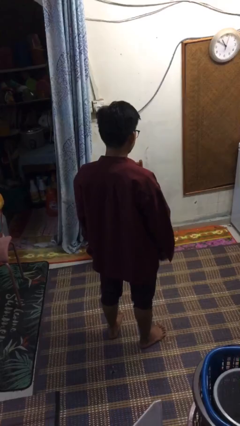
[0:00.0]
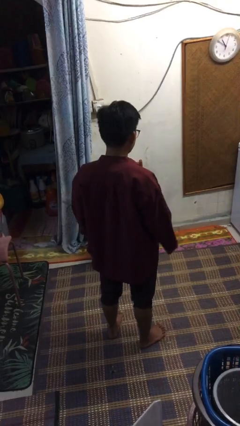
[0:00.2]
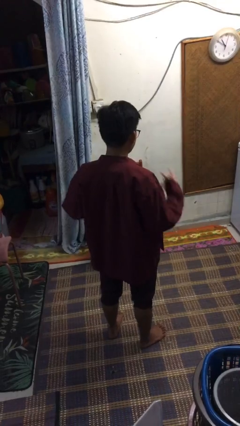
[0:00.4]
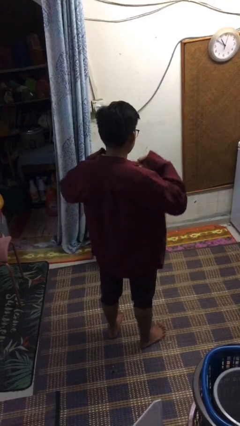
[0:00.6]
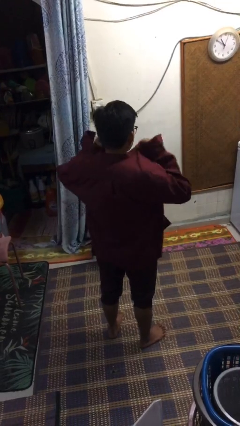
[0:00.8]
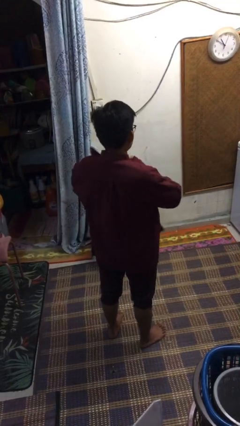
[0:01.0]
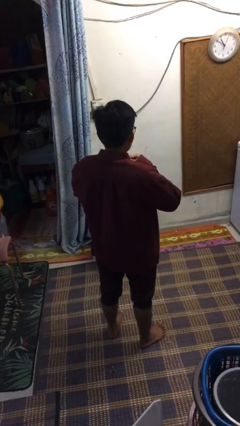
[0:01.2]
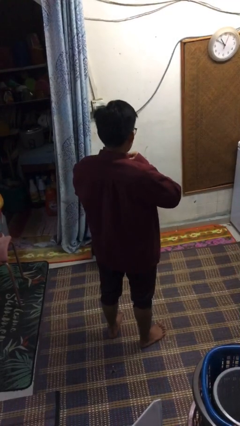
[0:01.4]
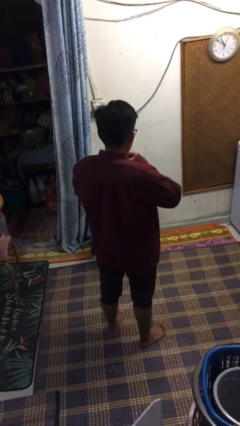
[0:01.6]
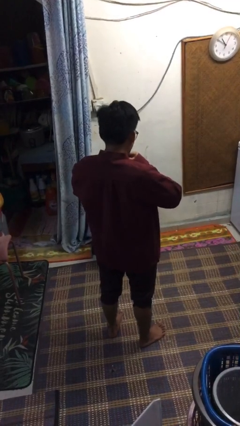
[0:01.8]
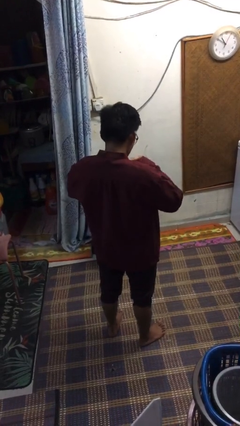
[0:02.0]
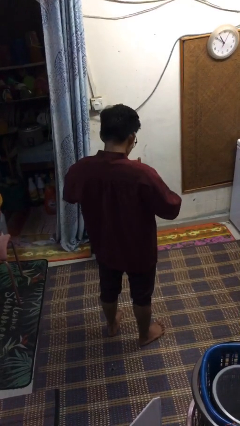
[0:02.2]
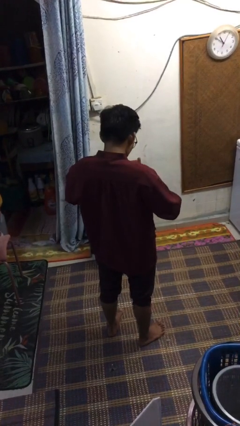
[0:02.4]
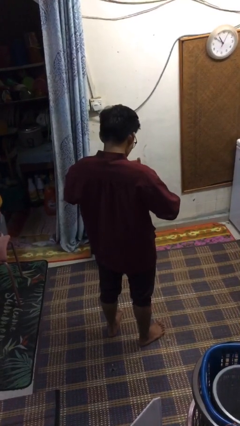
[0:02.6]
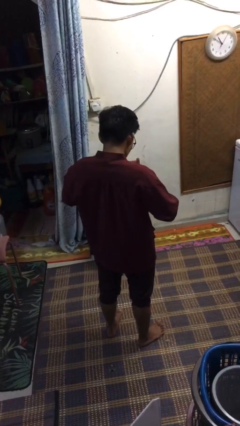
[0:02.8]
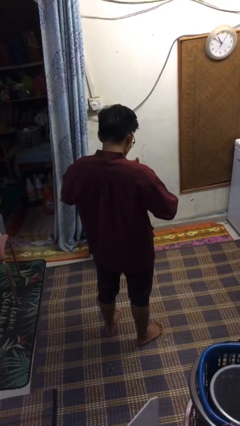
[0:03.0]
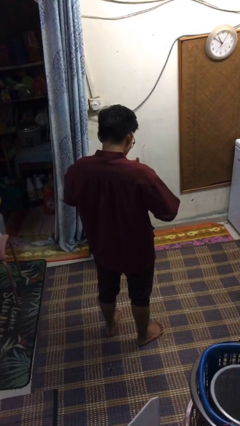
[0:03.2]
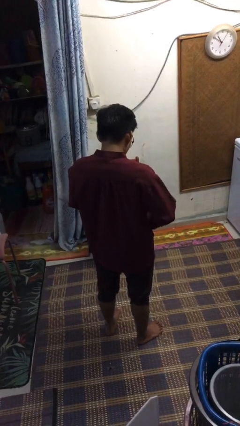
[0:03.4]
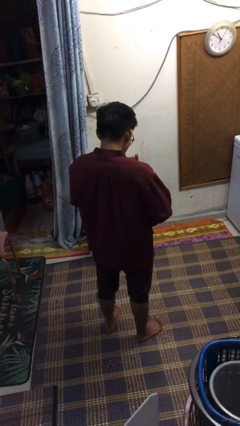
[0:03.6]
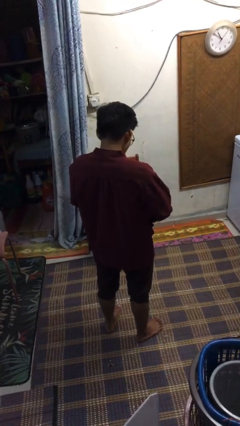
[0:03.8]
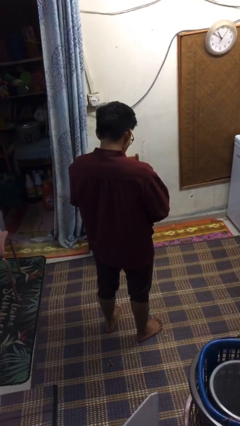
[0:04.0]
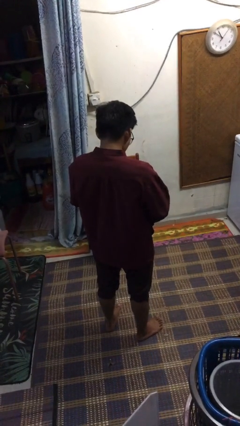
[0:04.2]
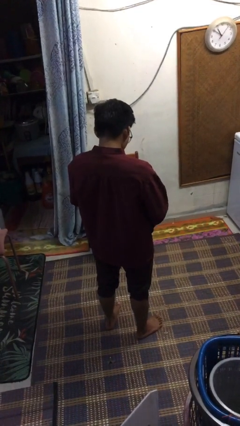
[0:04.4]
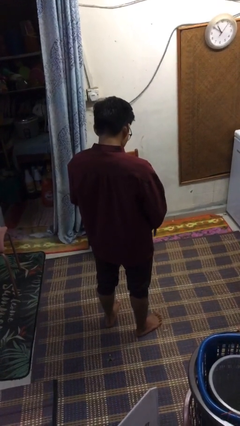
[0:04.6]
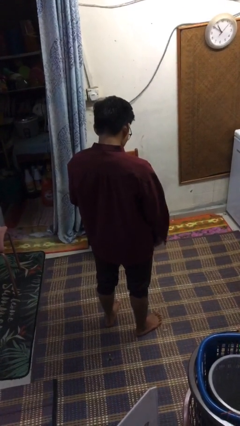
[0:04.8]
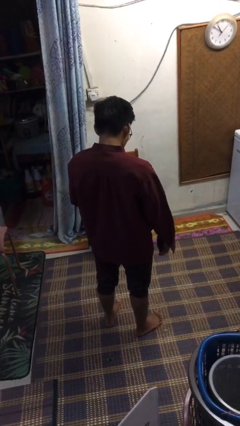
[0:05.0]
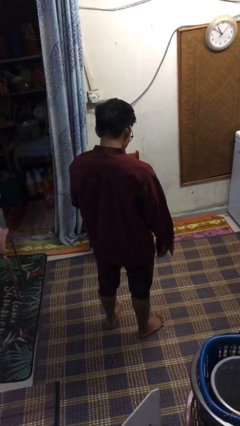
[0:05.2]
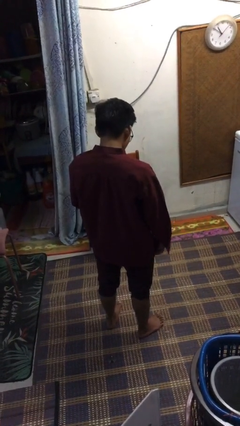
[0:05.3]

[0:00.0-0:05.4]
person buttons shirt

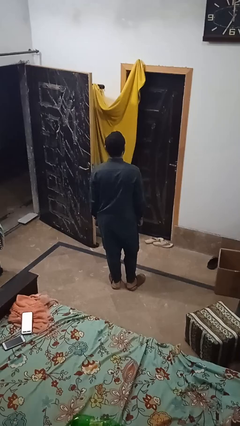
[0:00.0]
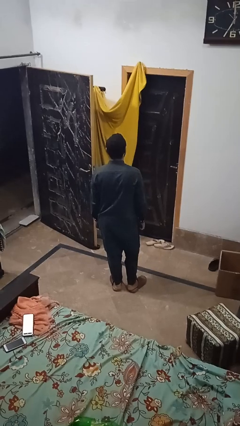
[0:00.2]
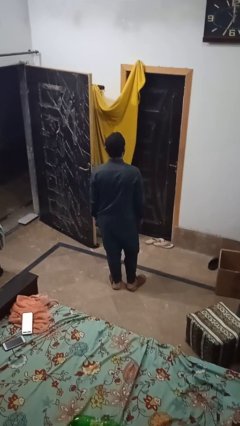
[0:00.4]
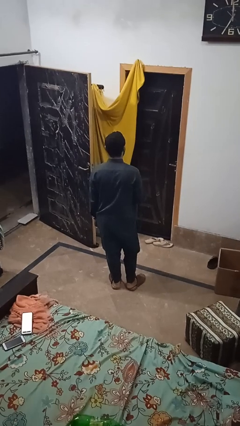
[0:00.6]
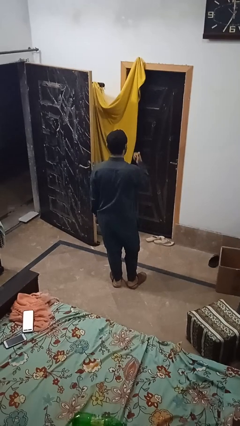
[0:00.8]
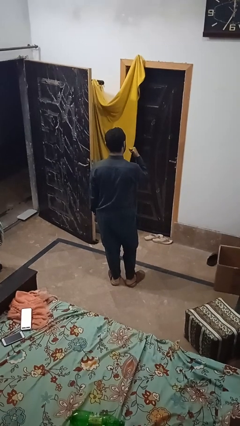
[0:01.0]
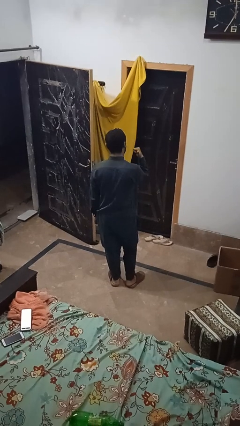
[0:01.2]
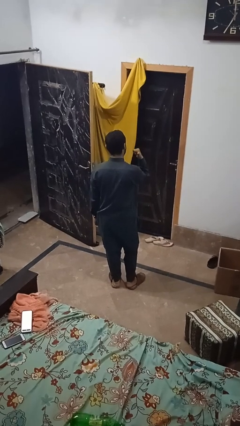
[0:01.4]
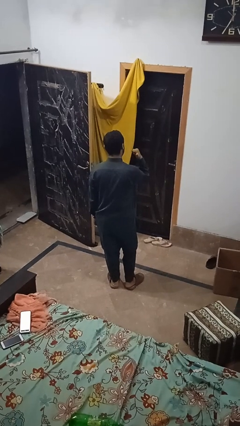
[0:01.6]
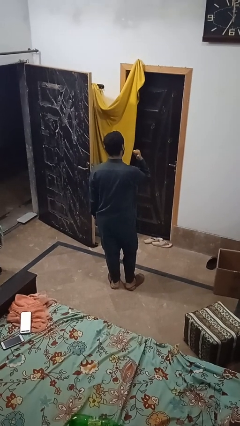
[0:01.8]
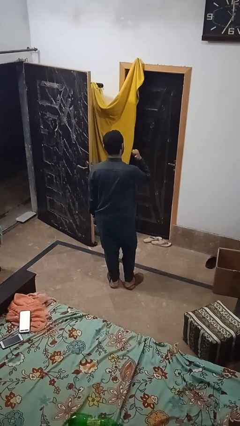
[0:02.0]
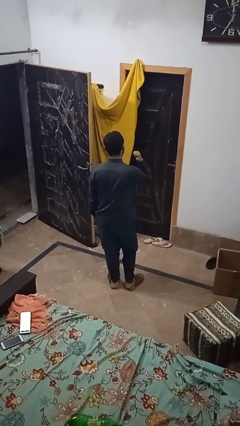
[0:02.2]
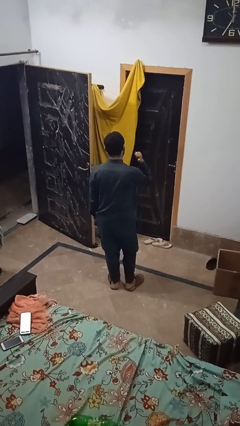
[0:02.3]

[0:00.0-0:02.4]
person gestures behind me

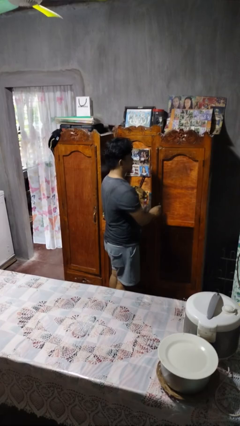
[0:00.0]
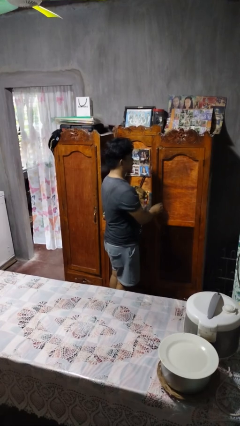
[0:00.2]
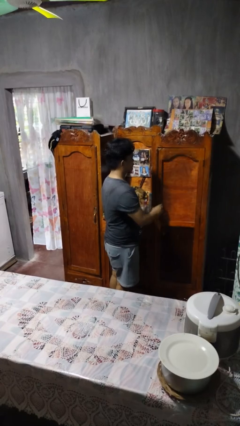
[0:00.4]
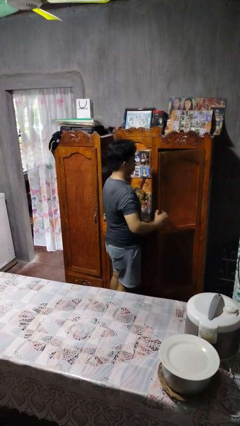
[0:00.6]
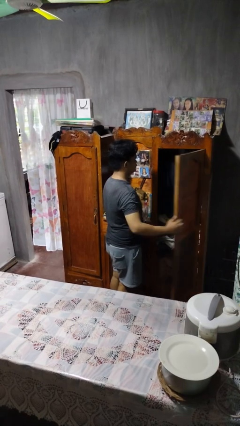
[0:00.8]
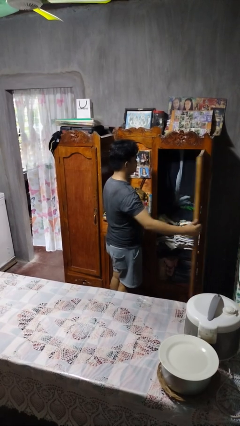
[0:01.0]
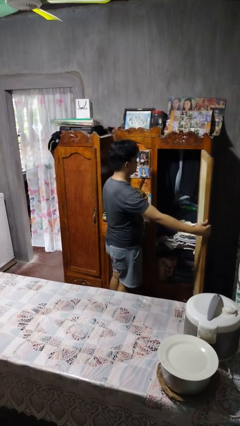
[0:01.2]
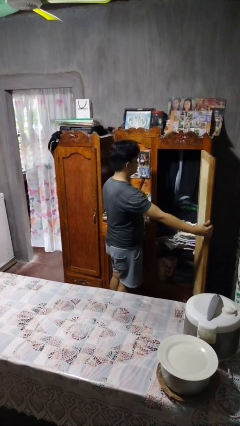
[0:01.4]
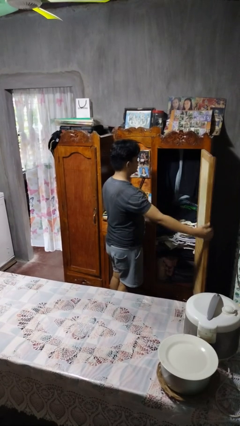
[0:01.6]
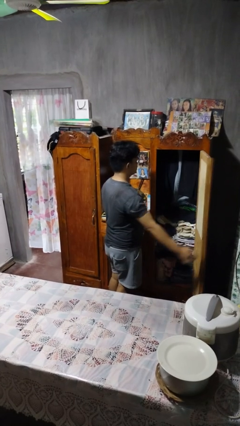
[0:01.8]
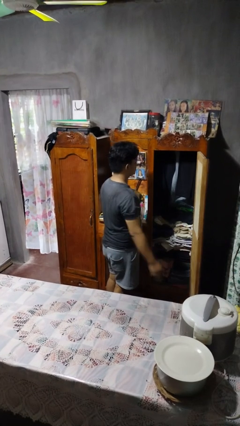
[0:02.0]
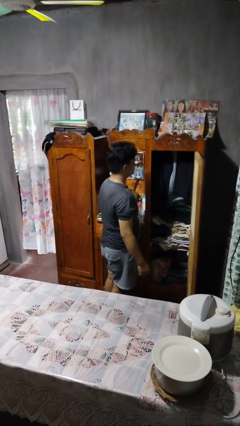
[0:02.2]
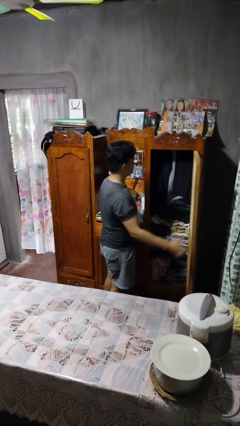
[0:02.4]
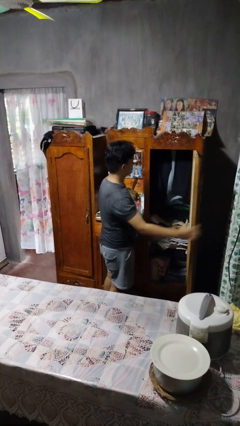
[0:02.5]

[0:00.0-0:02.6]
person opens closet door

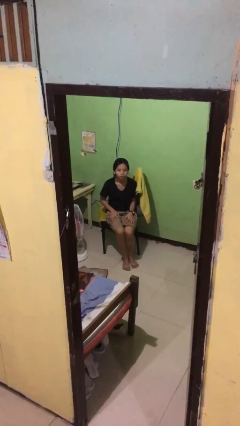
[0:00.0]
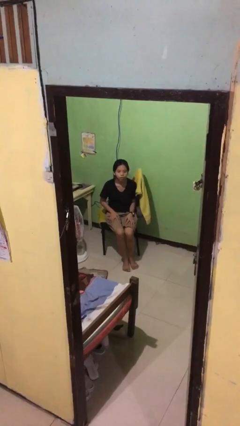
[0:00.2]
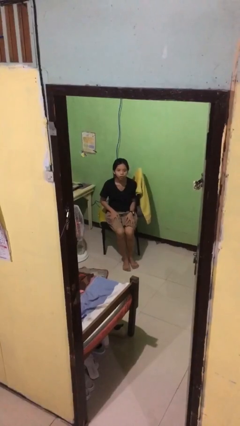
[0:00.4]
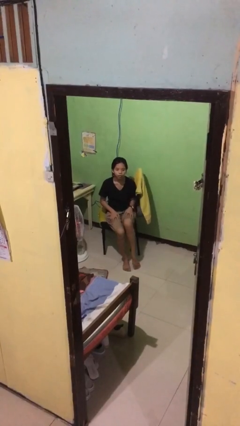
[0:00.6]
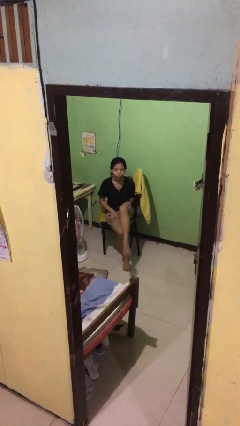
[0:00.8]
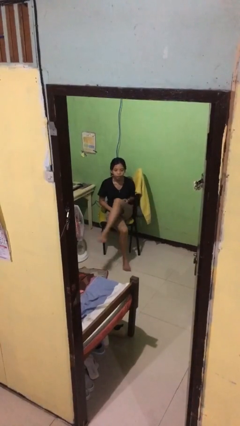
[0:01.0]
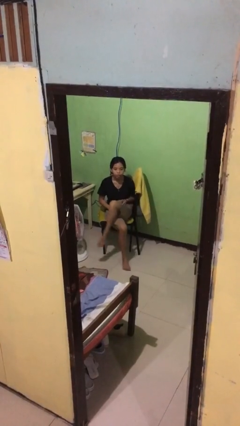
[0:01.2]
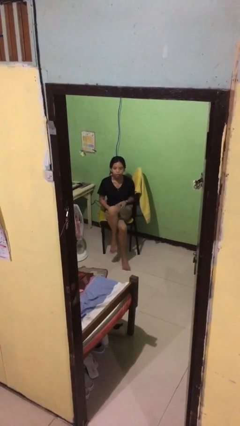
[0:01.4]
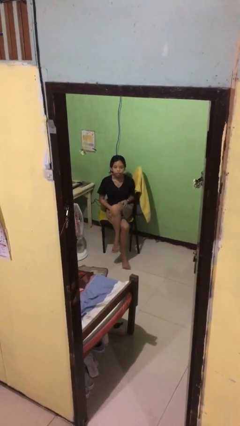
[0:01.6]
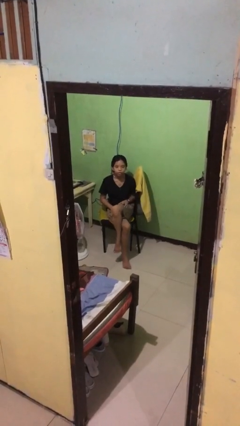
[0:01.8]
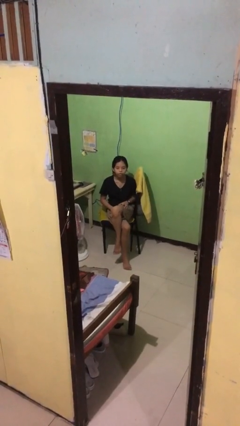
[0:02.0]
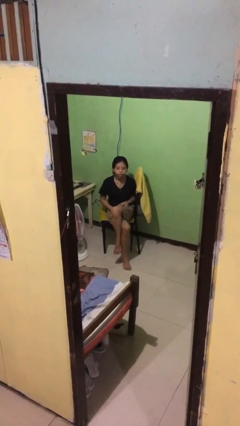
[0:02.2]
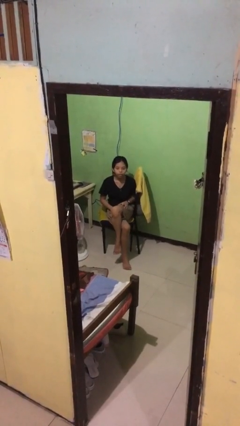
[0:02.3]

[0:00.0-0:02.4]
person crosses legs

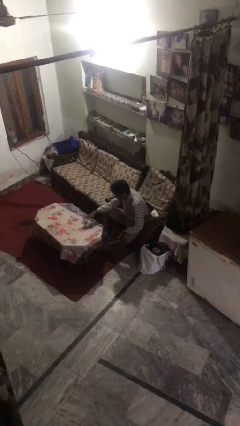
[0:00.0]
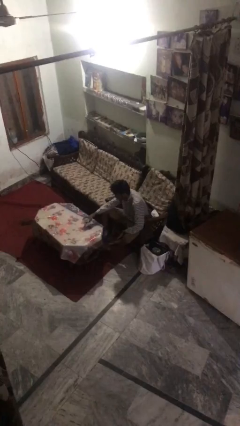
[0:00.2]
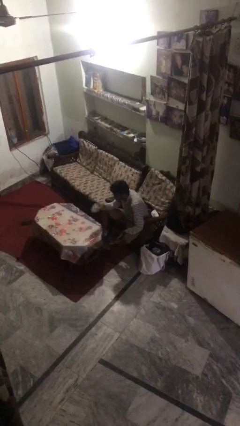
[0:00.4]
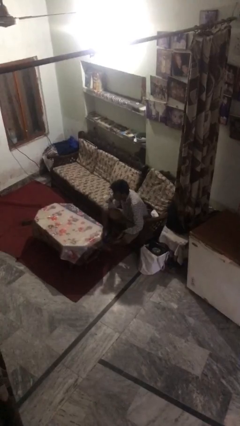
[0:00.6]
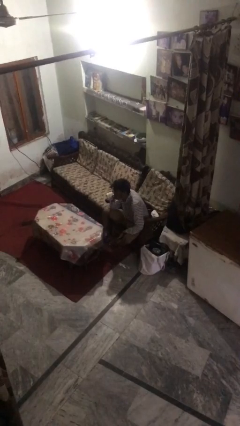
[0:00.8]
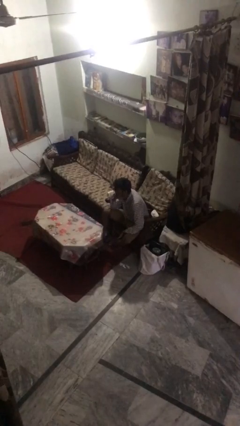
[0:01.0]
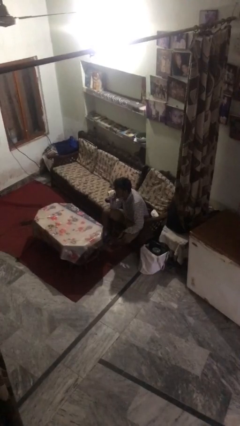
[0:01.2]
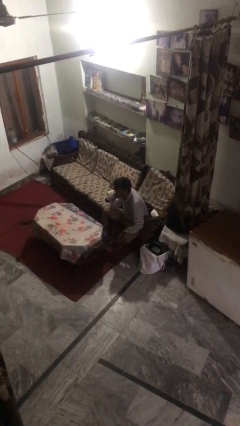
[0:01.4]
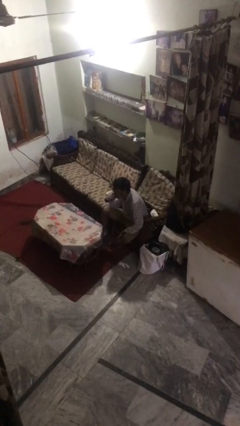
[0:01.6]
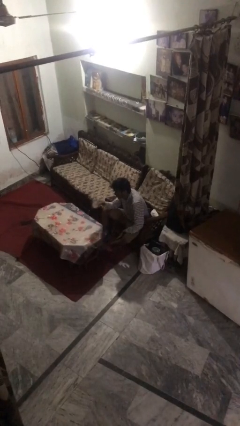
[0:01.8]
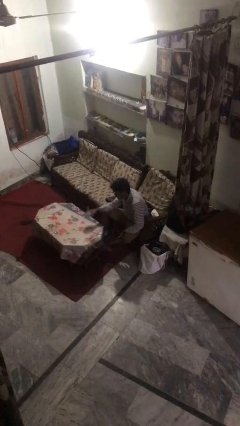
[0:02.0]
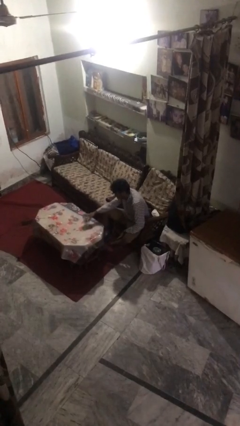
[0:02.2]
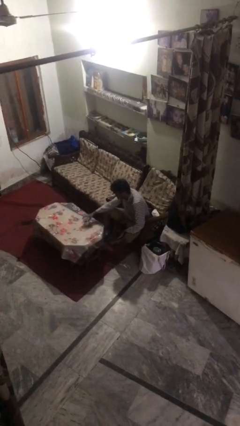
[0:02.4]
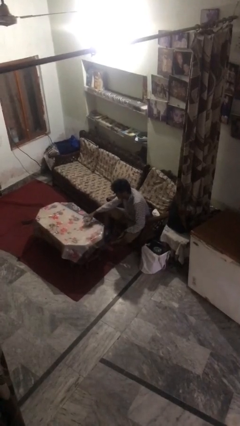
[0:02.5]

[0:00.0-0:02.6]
person drinks from mug

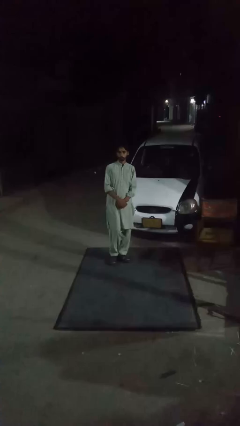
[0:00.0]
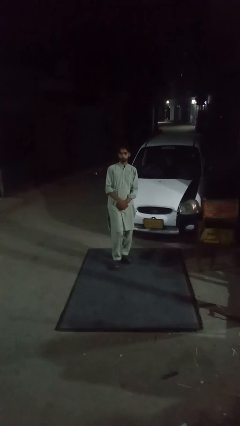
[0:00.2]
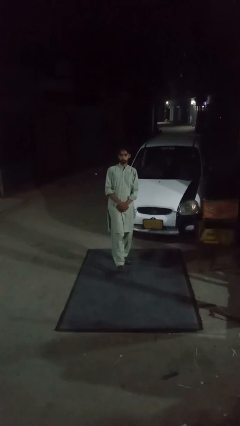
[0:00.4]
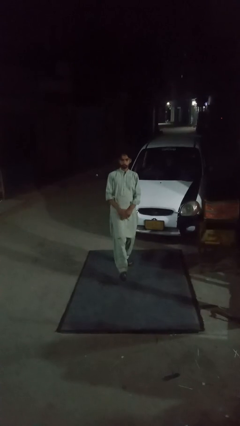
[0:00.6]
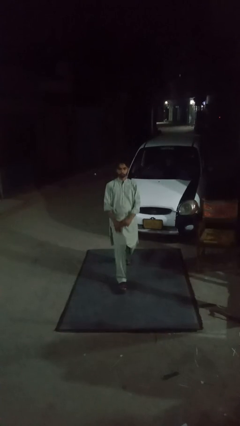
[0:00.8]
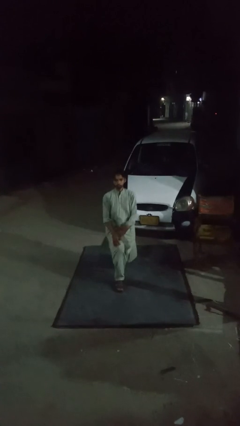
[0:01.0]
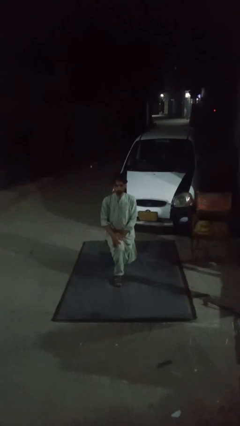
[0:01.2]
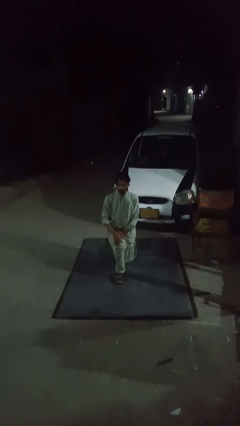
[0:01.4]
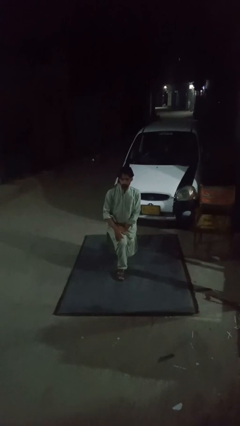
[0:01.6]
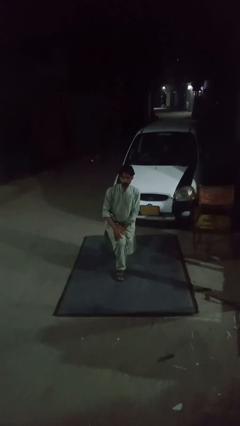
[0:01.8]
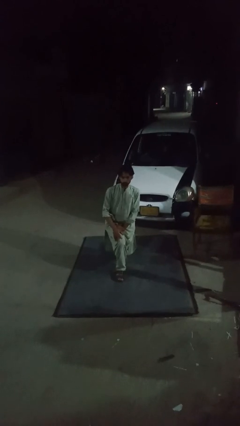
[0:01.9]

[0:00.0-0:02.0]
person exercises with lunges
